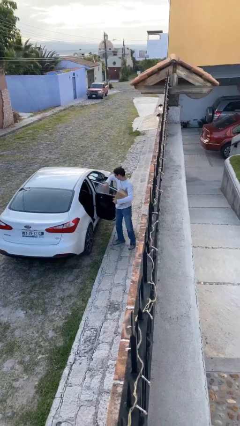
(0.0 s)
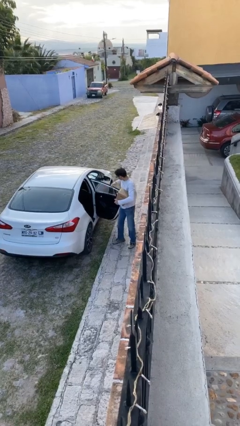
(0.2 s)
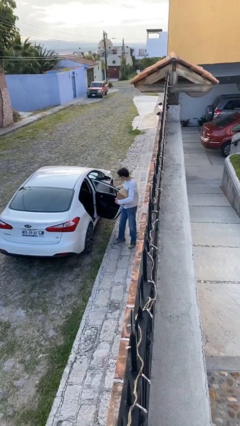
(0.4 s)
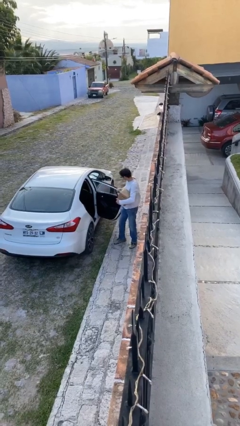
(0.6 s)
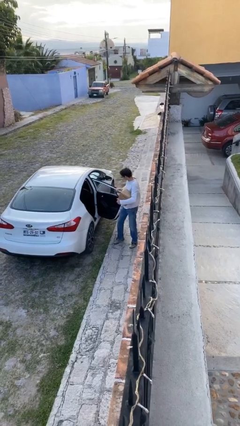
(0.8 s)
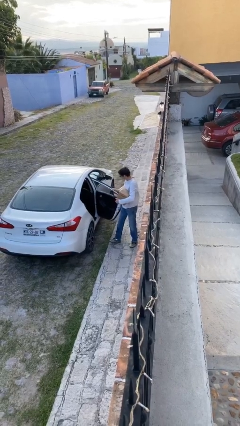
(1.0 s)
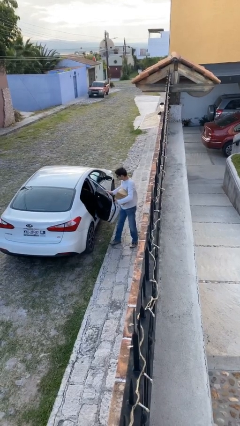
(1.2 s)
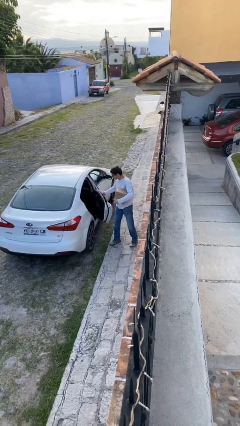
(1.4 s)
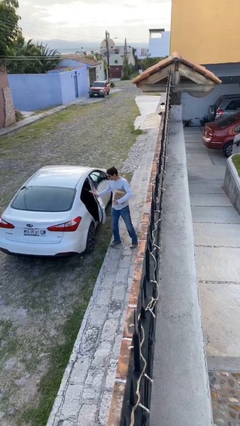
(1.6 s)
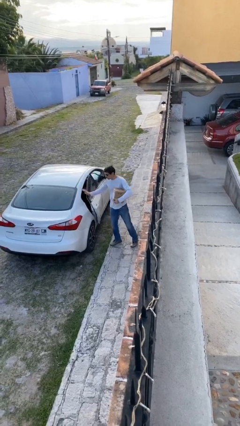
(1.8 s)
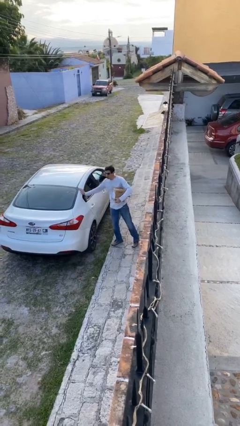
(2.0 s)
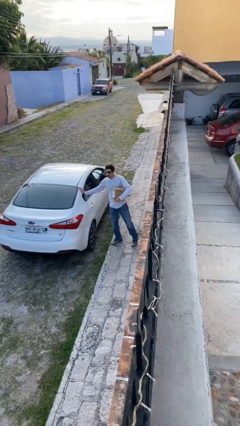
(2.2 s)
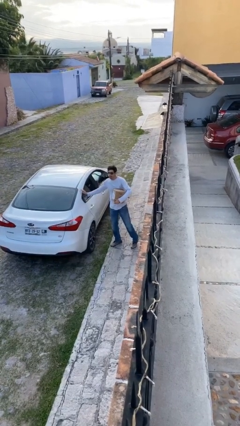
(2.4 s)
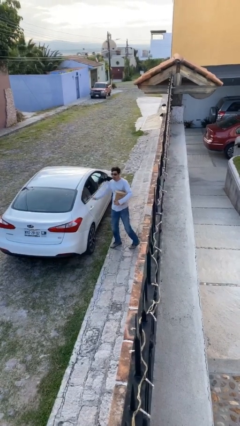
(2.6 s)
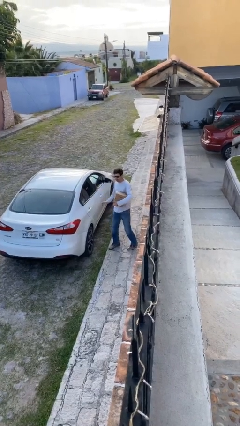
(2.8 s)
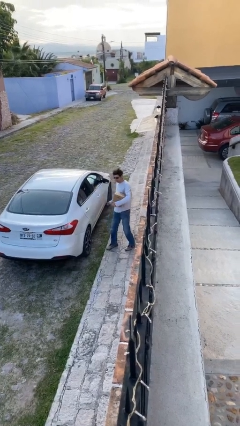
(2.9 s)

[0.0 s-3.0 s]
person closes car door

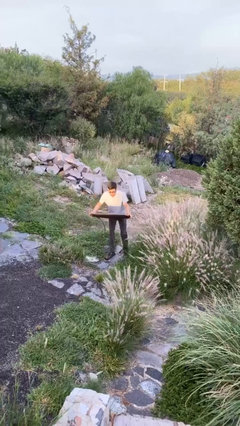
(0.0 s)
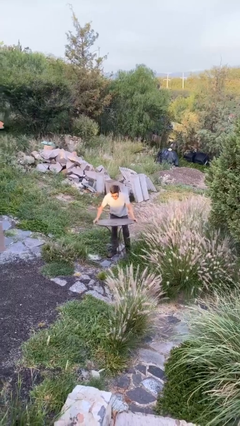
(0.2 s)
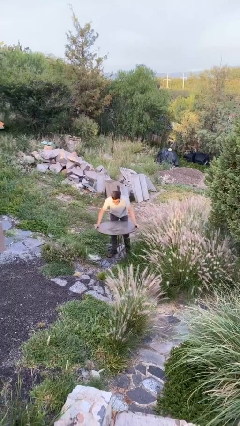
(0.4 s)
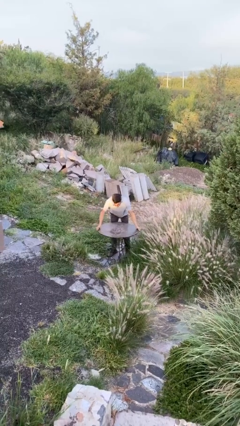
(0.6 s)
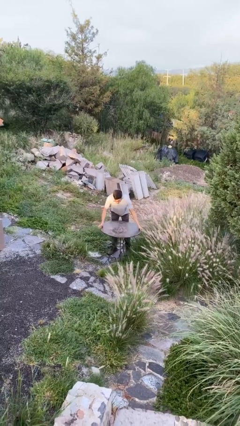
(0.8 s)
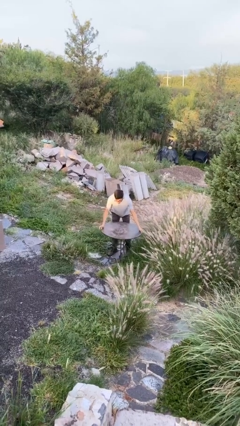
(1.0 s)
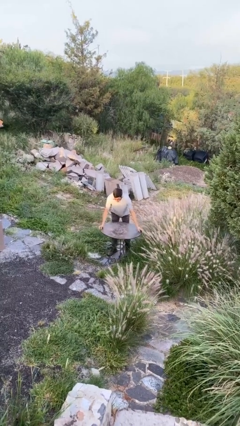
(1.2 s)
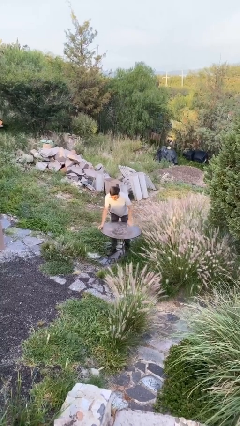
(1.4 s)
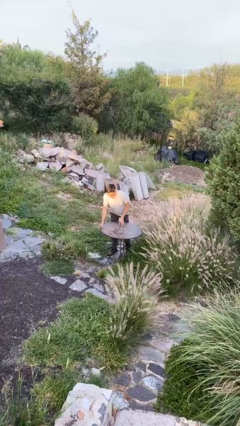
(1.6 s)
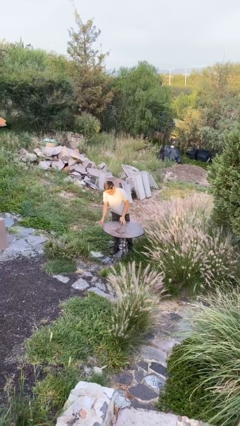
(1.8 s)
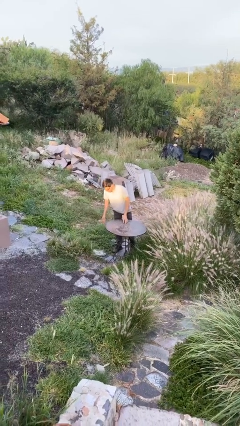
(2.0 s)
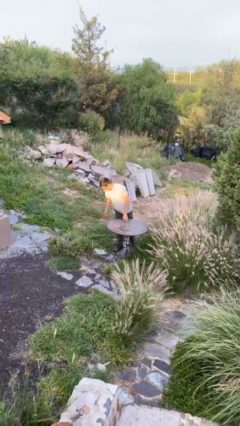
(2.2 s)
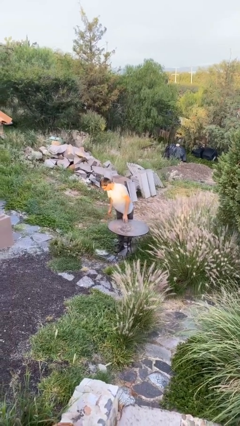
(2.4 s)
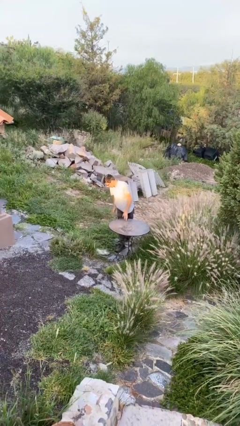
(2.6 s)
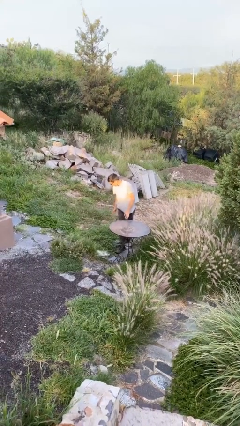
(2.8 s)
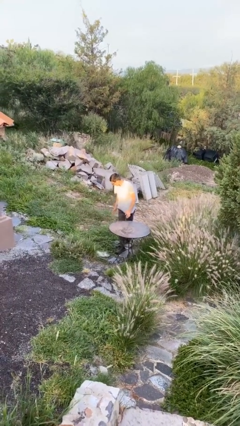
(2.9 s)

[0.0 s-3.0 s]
person puts down object on floor

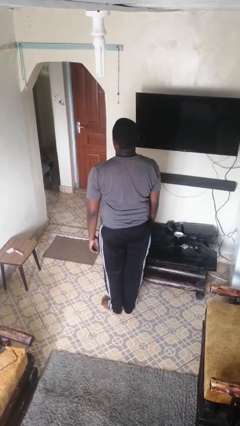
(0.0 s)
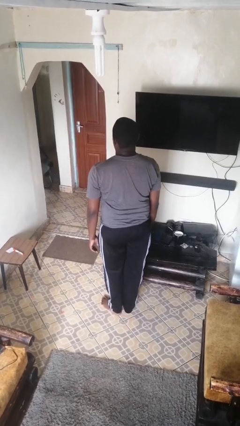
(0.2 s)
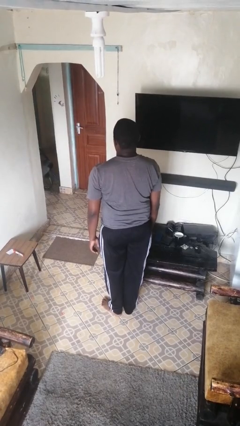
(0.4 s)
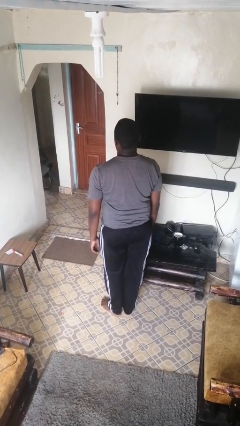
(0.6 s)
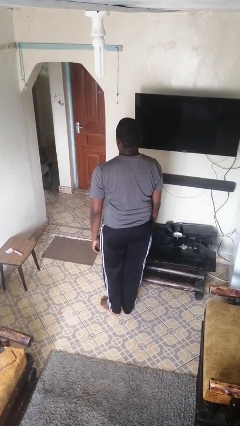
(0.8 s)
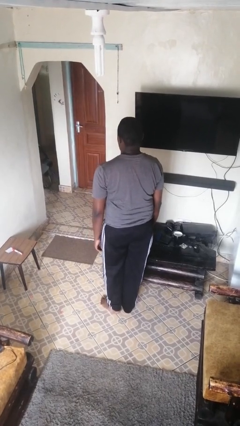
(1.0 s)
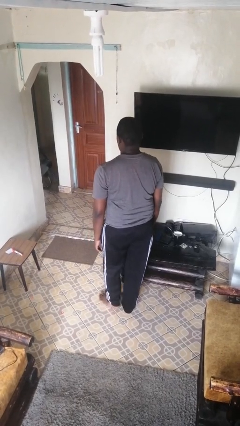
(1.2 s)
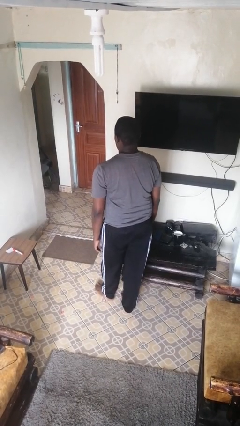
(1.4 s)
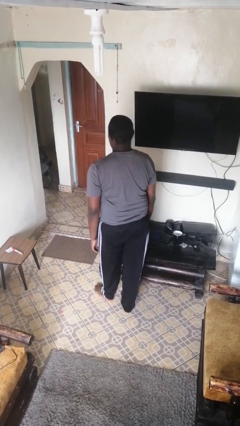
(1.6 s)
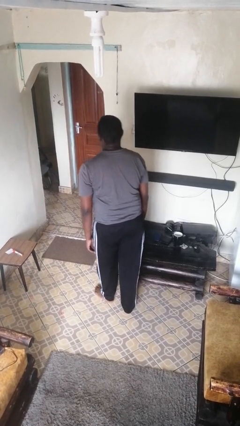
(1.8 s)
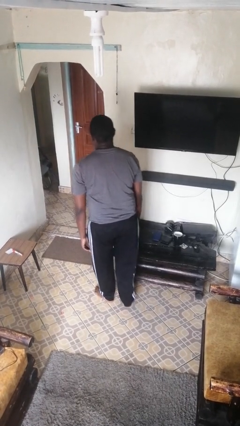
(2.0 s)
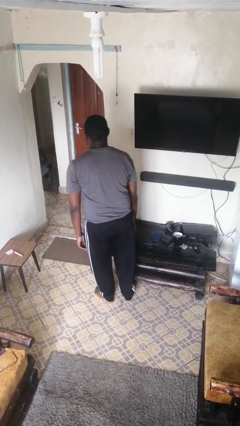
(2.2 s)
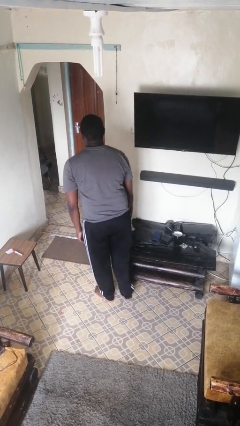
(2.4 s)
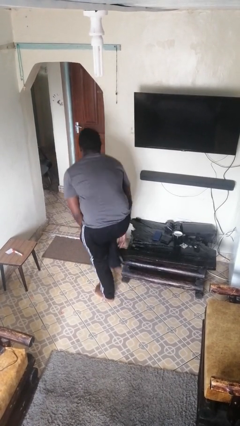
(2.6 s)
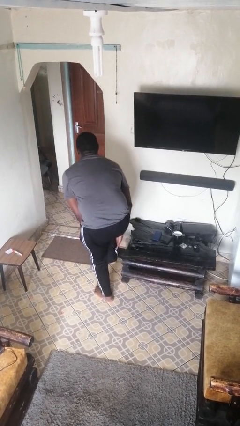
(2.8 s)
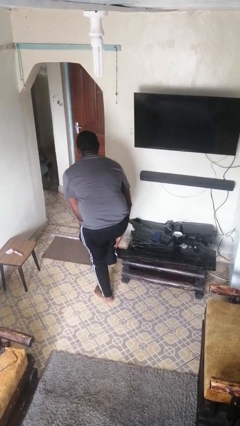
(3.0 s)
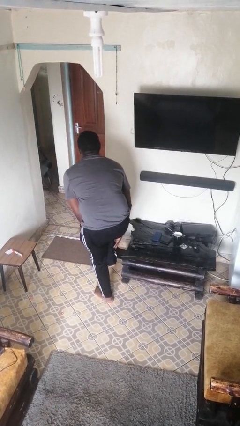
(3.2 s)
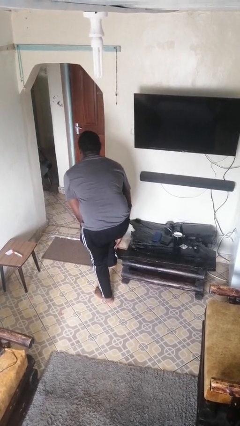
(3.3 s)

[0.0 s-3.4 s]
person bumps into table

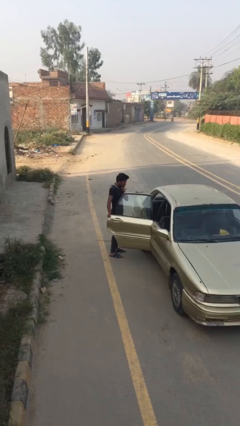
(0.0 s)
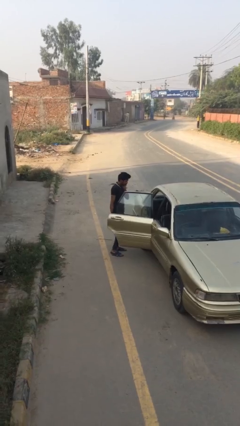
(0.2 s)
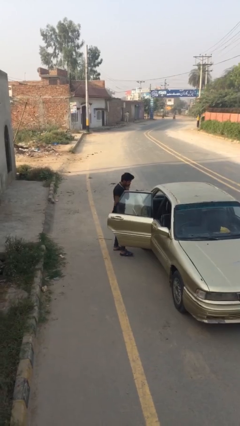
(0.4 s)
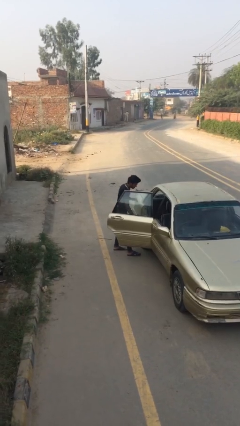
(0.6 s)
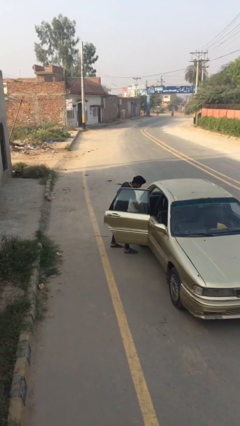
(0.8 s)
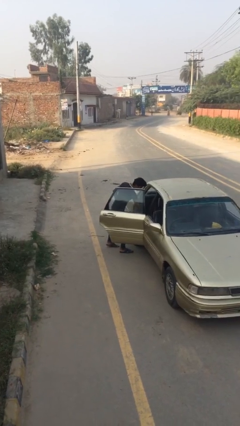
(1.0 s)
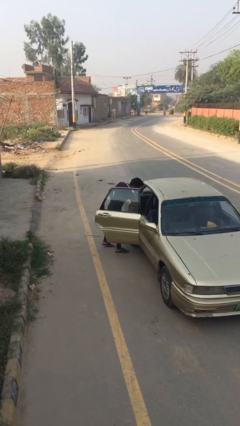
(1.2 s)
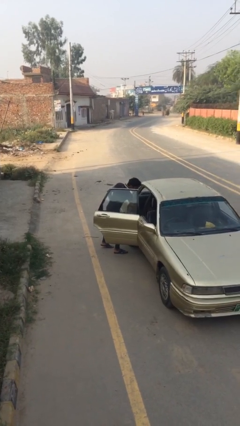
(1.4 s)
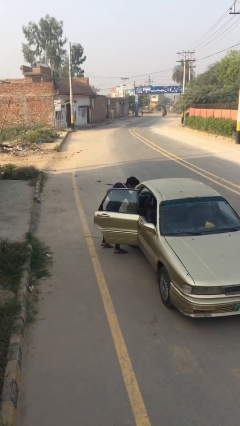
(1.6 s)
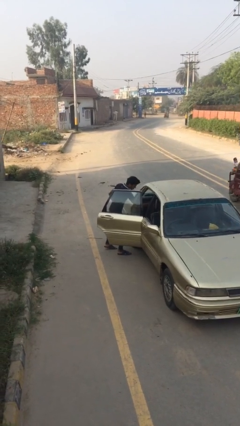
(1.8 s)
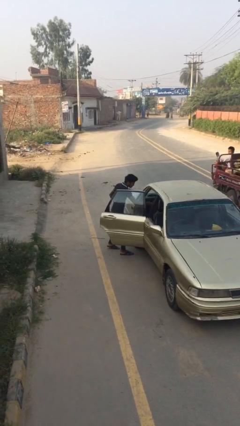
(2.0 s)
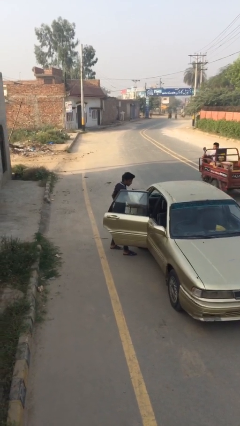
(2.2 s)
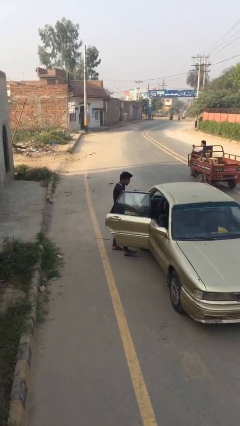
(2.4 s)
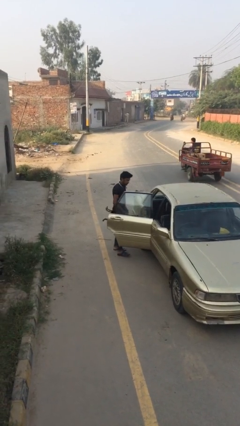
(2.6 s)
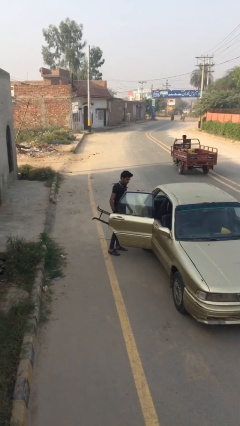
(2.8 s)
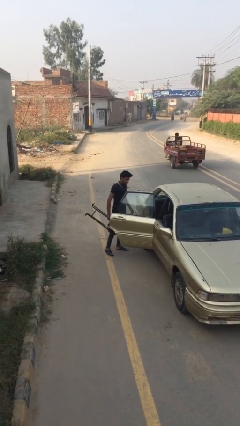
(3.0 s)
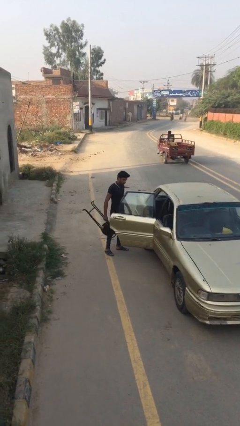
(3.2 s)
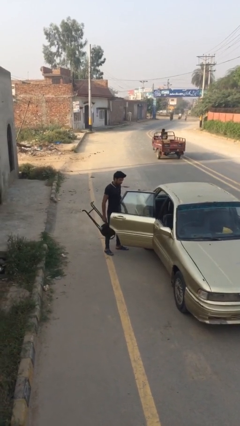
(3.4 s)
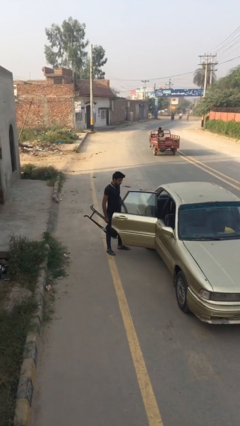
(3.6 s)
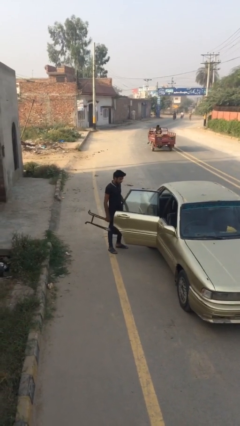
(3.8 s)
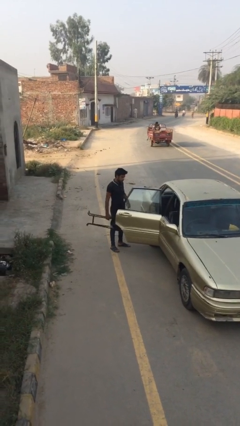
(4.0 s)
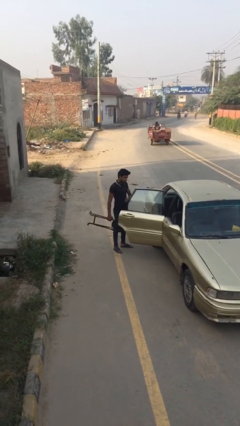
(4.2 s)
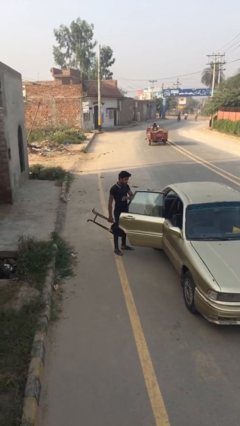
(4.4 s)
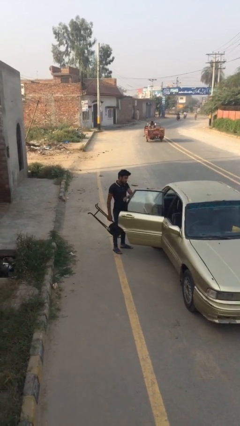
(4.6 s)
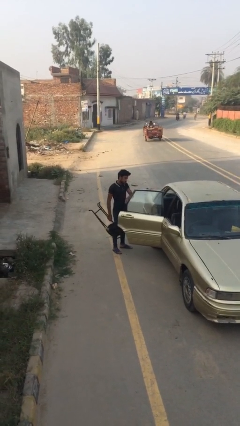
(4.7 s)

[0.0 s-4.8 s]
person unloads car

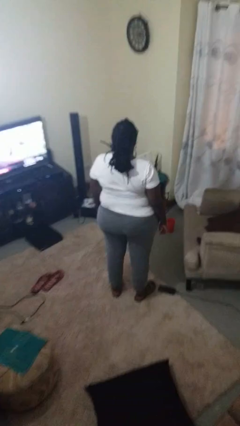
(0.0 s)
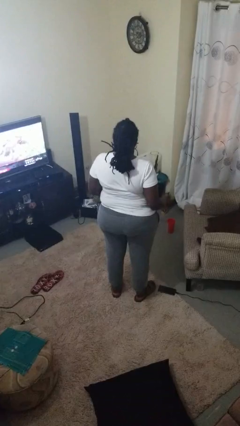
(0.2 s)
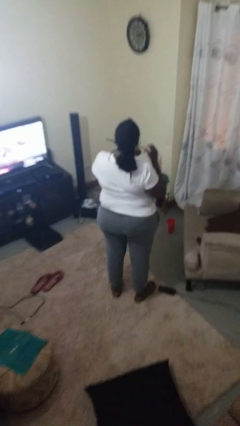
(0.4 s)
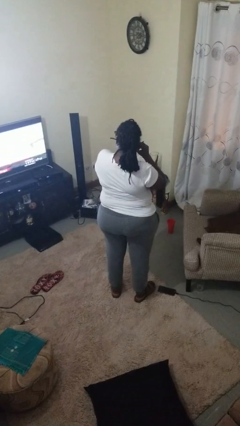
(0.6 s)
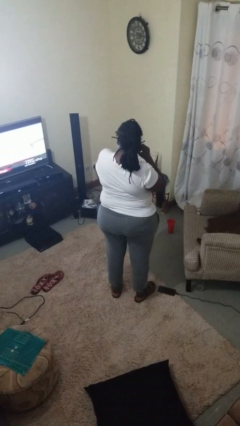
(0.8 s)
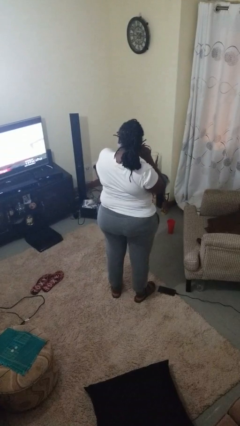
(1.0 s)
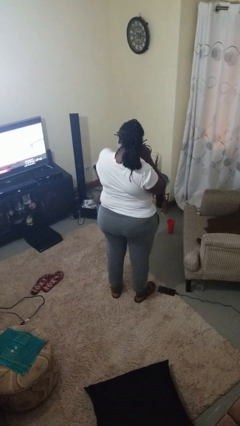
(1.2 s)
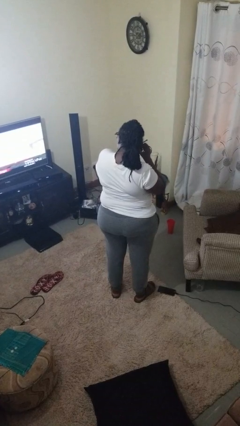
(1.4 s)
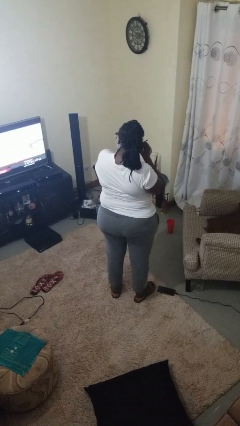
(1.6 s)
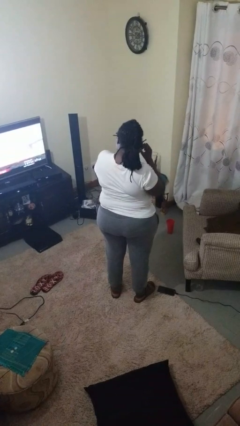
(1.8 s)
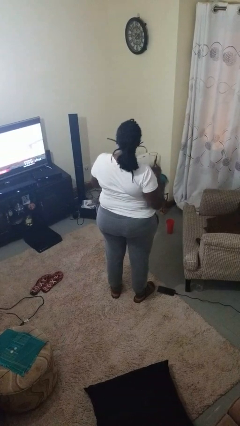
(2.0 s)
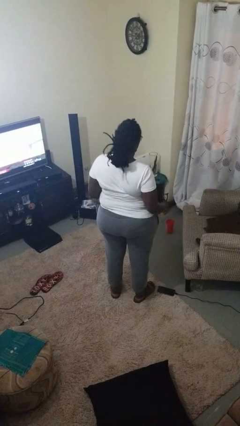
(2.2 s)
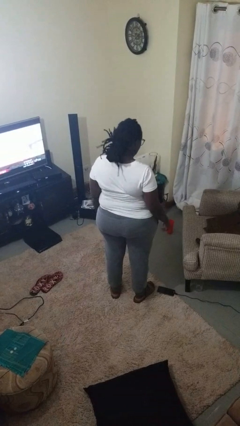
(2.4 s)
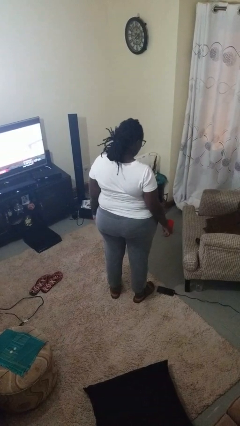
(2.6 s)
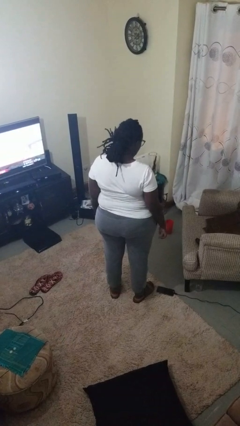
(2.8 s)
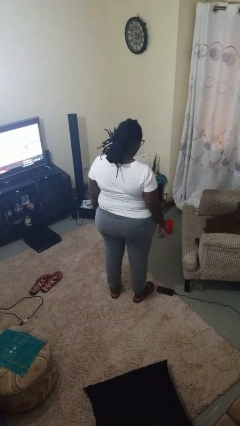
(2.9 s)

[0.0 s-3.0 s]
person takes off earrings
